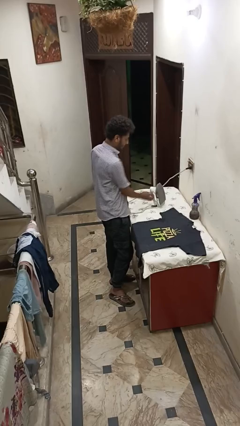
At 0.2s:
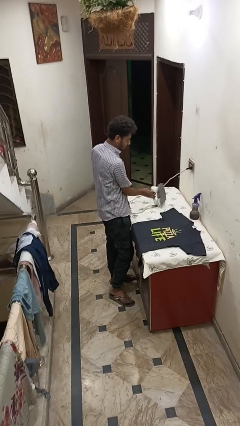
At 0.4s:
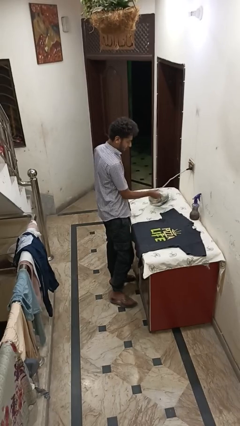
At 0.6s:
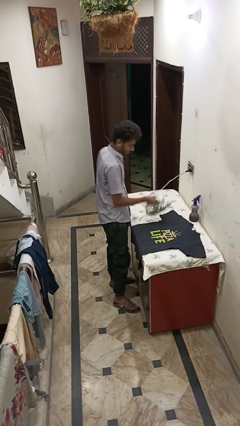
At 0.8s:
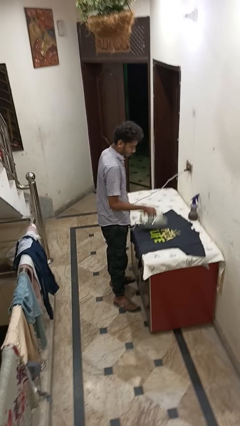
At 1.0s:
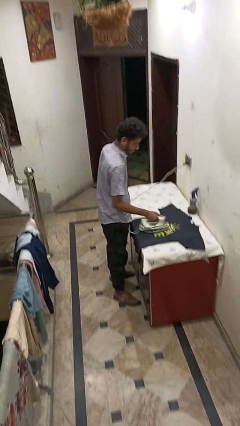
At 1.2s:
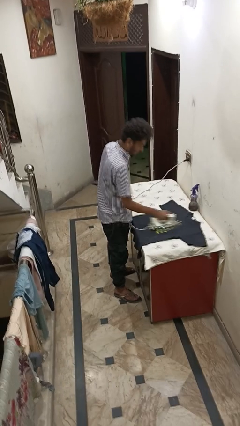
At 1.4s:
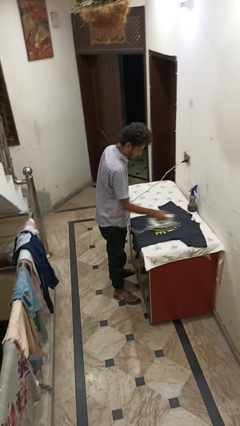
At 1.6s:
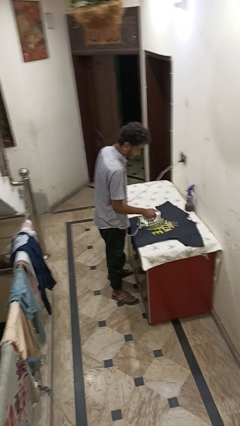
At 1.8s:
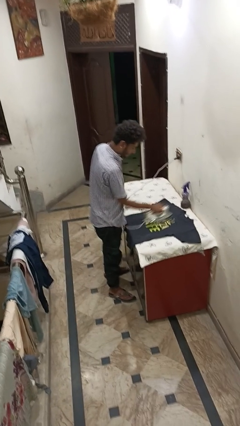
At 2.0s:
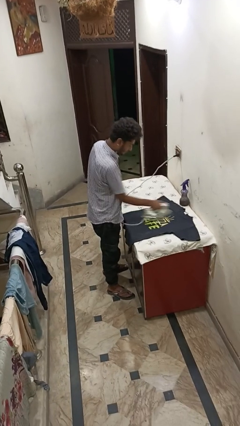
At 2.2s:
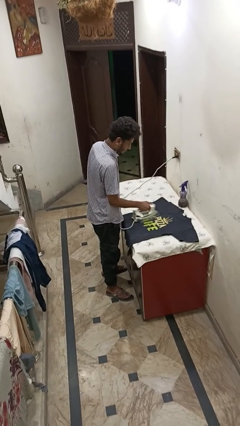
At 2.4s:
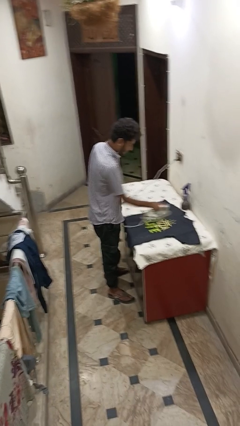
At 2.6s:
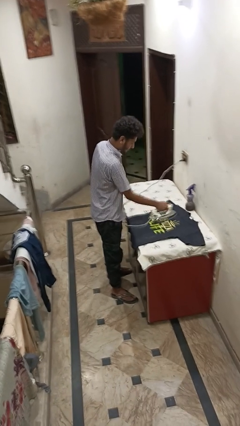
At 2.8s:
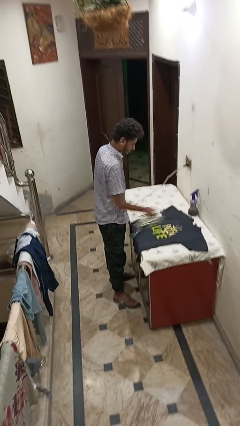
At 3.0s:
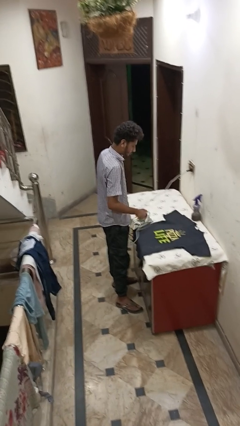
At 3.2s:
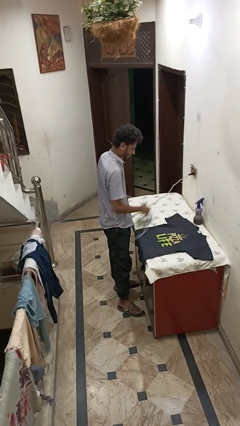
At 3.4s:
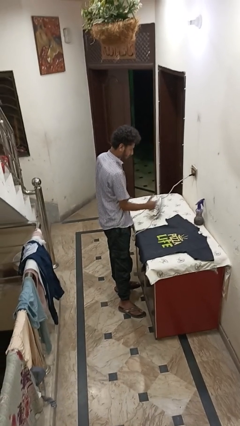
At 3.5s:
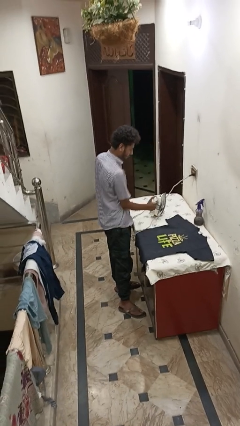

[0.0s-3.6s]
person irons clothes

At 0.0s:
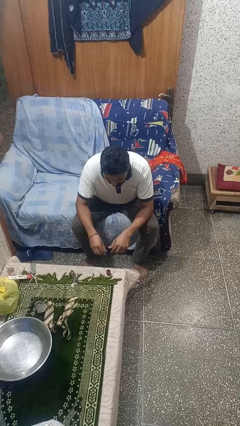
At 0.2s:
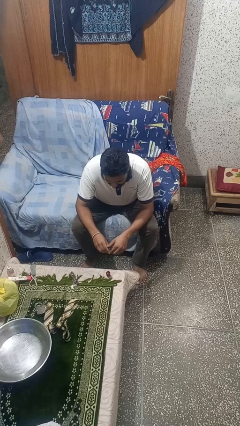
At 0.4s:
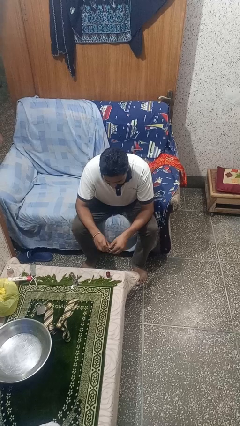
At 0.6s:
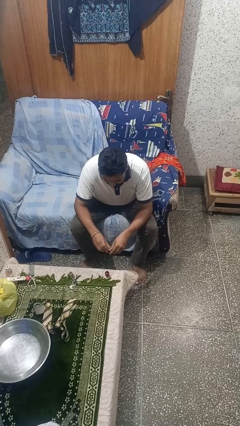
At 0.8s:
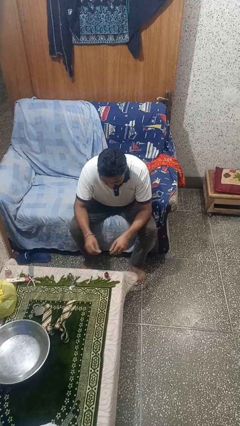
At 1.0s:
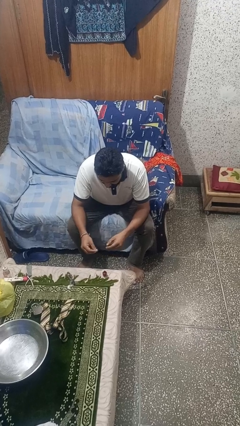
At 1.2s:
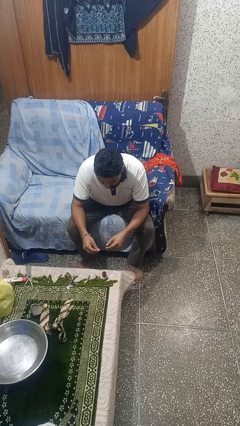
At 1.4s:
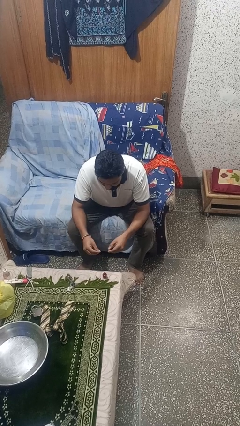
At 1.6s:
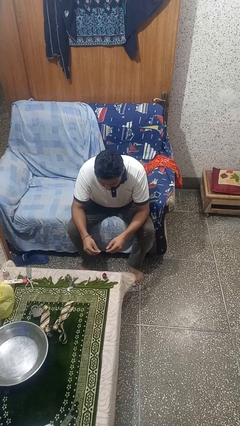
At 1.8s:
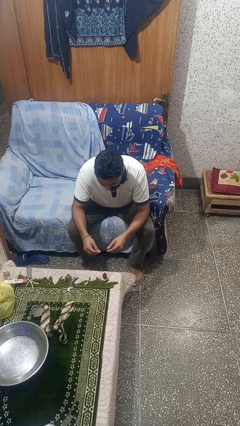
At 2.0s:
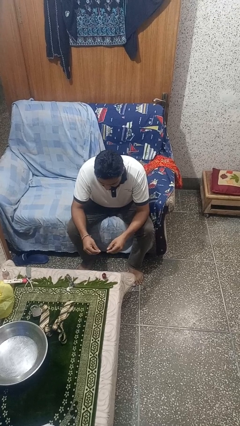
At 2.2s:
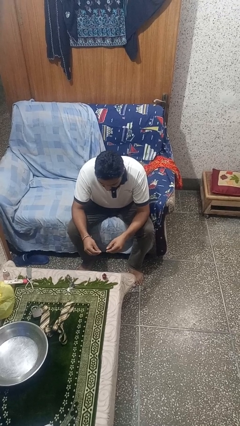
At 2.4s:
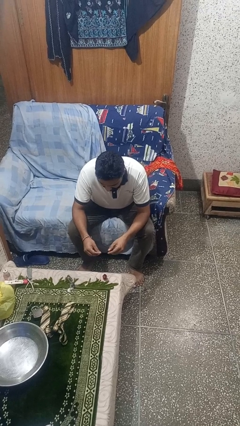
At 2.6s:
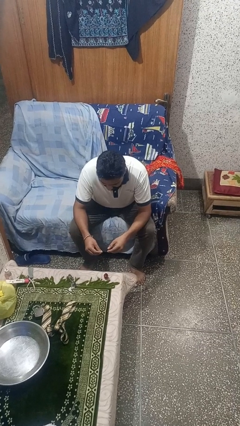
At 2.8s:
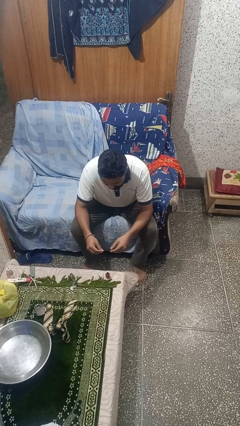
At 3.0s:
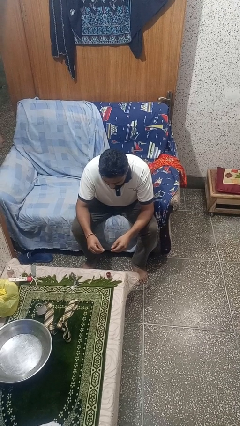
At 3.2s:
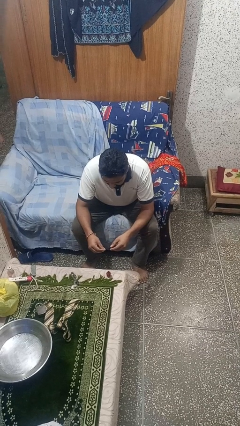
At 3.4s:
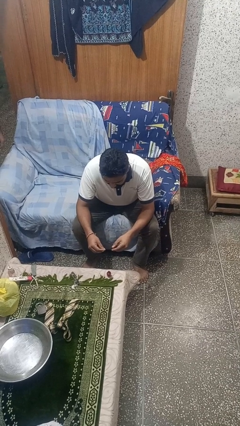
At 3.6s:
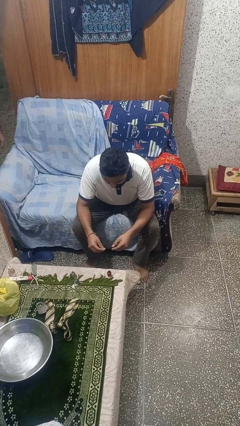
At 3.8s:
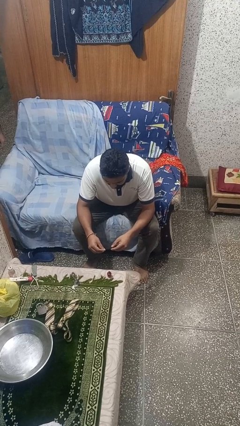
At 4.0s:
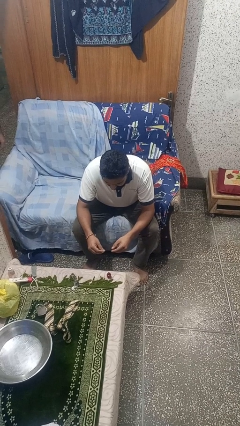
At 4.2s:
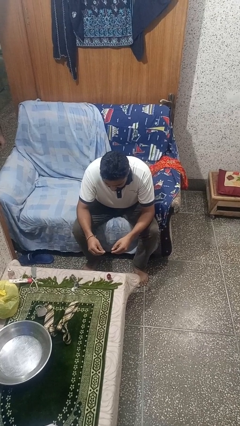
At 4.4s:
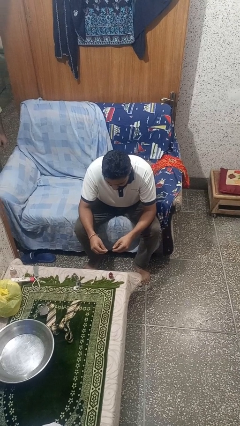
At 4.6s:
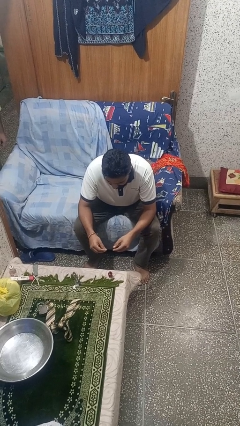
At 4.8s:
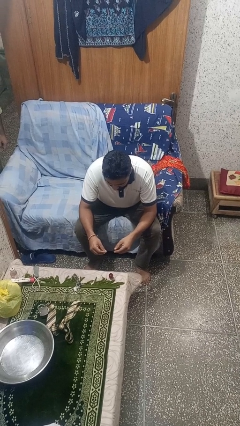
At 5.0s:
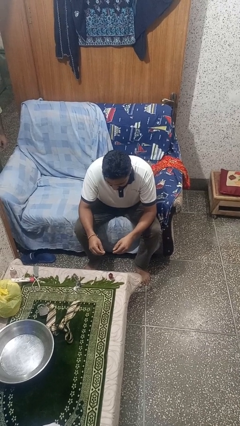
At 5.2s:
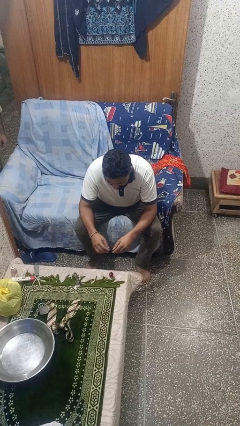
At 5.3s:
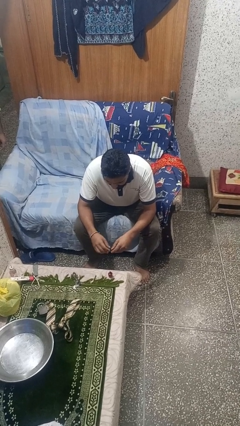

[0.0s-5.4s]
person paints fingernails

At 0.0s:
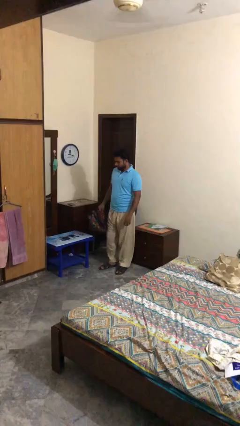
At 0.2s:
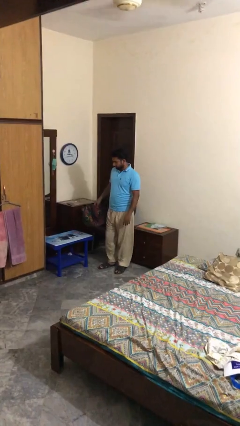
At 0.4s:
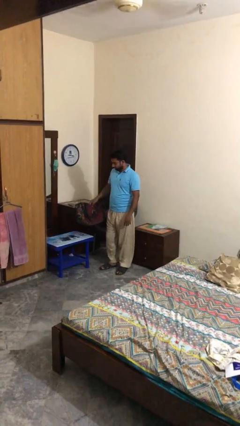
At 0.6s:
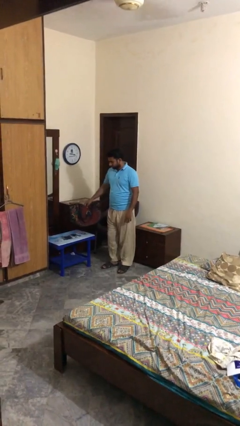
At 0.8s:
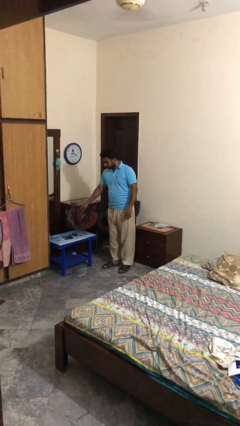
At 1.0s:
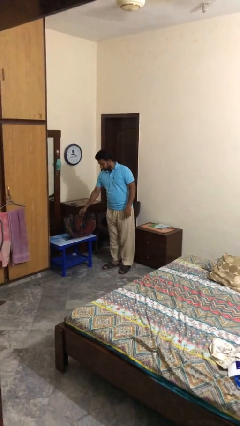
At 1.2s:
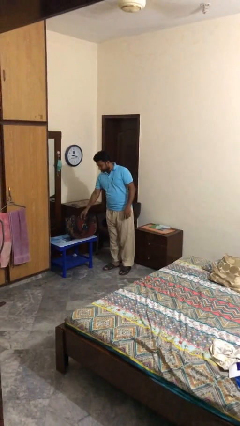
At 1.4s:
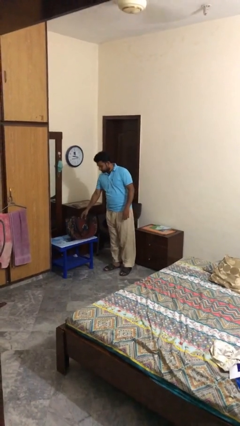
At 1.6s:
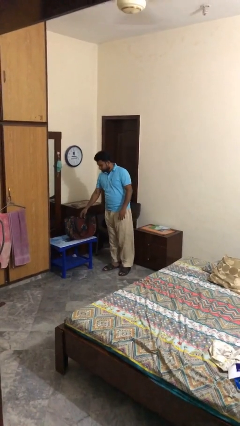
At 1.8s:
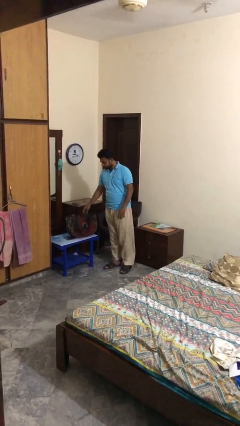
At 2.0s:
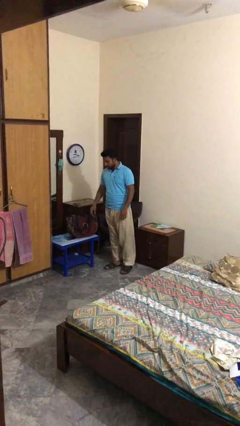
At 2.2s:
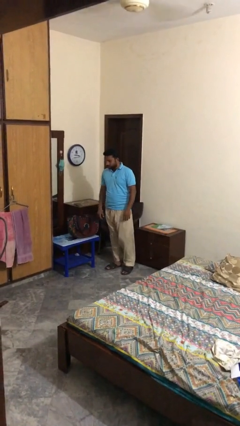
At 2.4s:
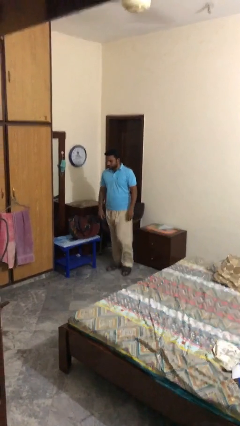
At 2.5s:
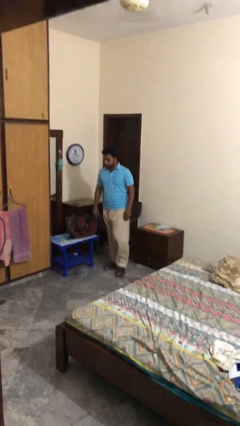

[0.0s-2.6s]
person puts down object on table

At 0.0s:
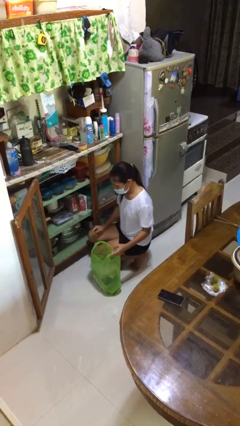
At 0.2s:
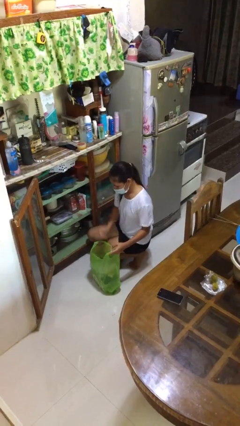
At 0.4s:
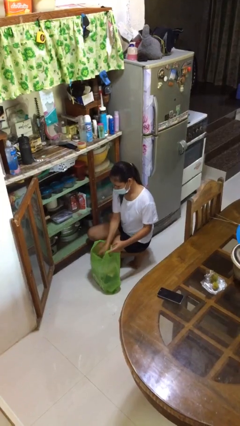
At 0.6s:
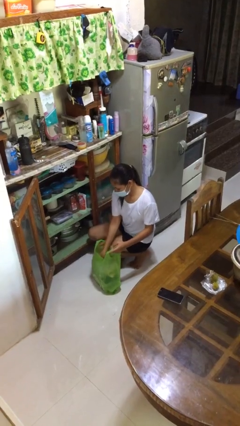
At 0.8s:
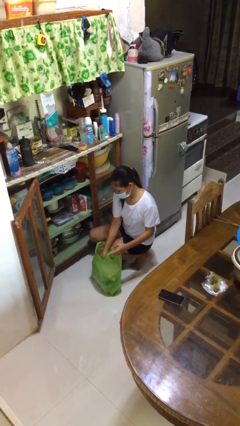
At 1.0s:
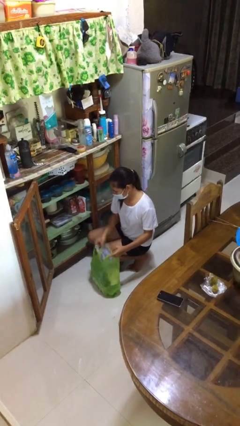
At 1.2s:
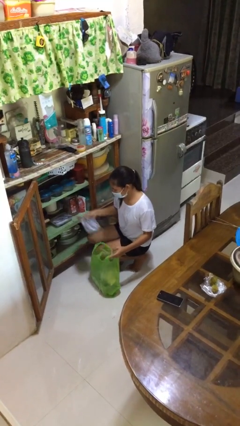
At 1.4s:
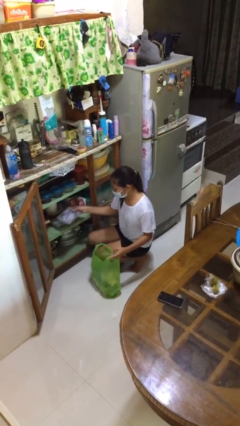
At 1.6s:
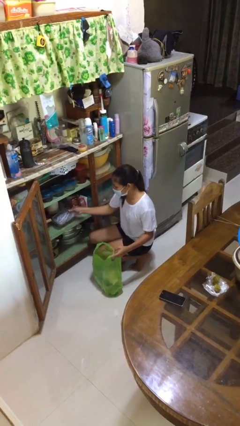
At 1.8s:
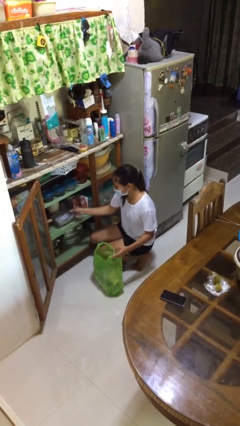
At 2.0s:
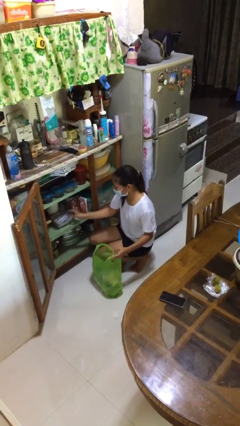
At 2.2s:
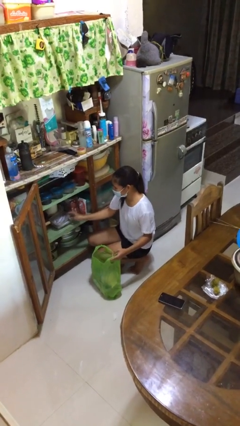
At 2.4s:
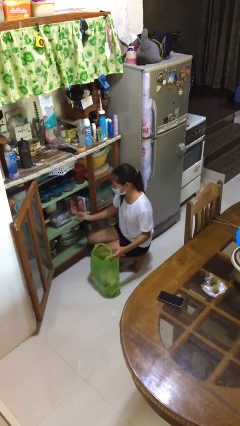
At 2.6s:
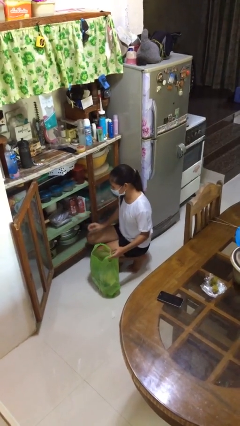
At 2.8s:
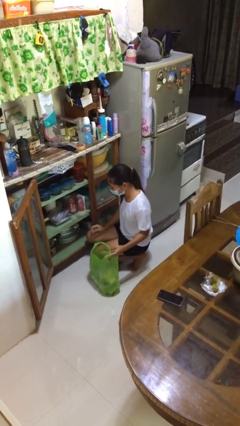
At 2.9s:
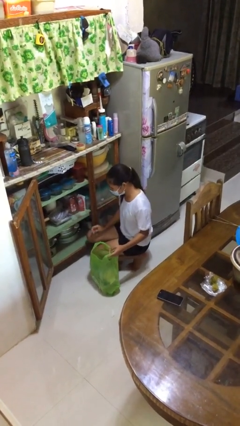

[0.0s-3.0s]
person loads groceries into cabinet

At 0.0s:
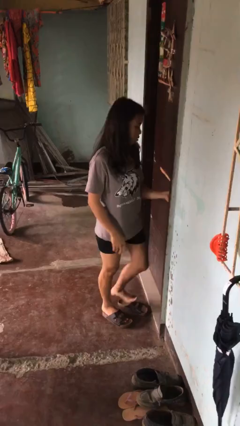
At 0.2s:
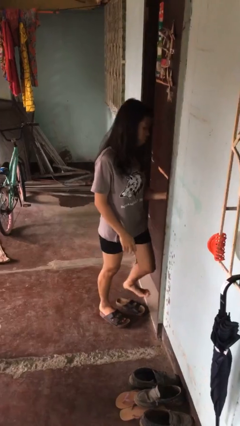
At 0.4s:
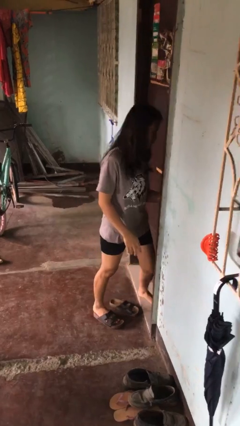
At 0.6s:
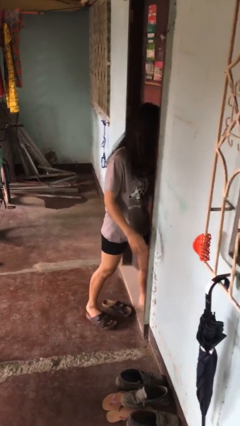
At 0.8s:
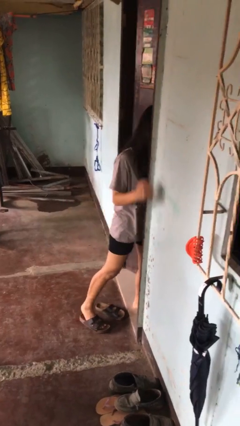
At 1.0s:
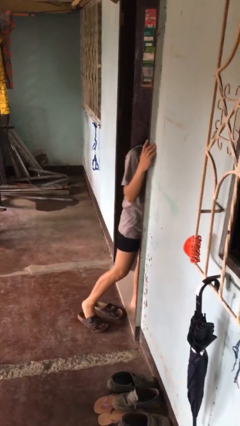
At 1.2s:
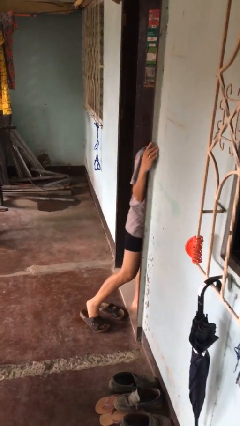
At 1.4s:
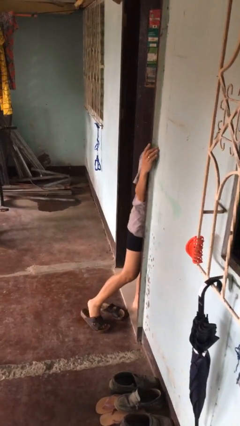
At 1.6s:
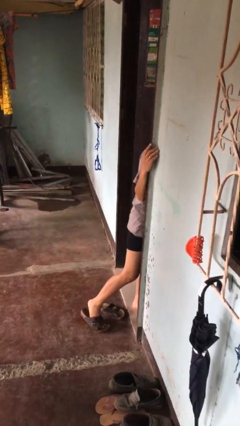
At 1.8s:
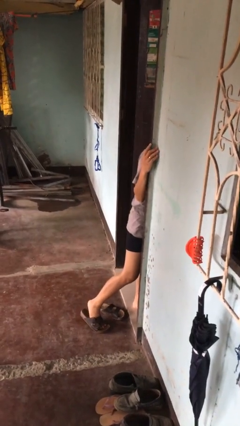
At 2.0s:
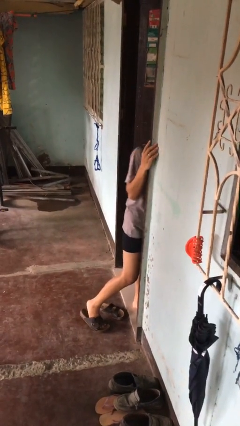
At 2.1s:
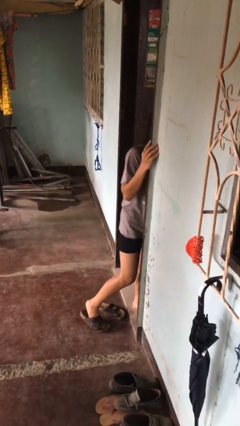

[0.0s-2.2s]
person opens facility door

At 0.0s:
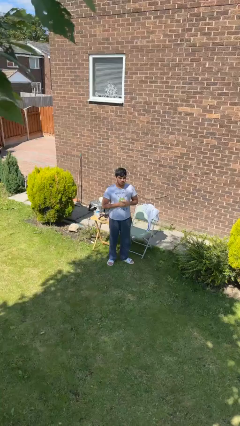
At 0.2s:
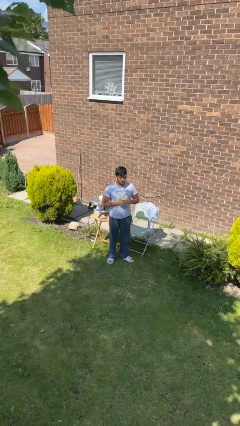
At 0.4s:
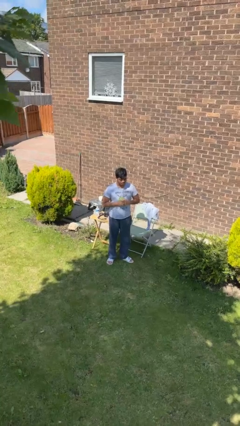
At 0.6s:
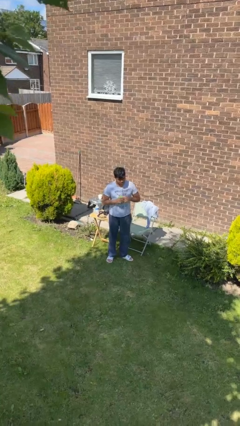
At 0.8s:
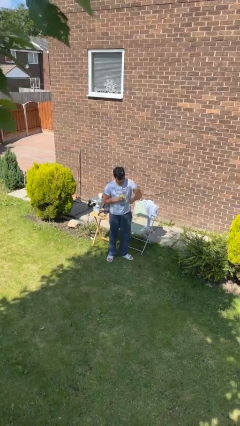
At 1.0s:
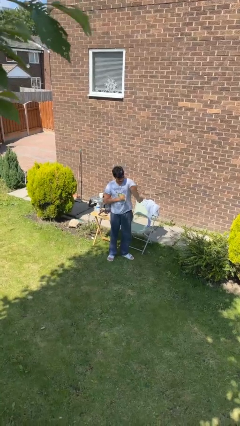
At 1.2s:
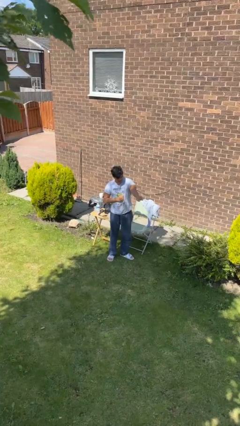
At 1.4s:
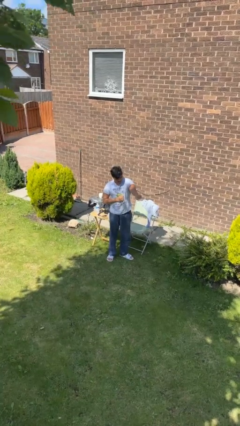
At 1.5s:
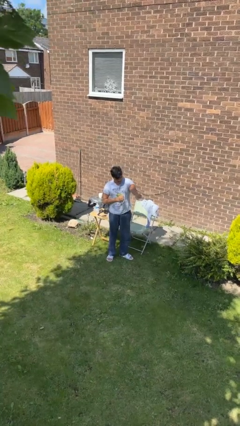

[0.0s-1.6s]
person punches
